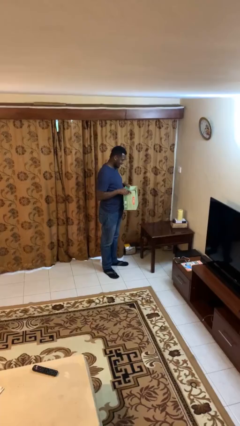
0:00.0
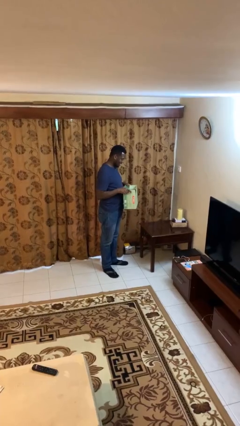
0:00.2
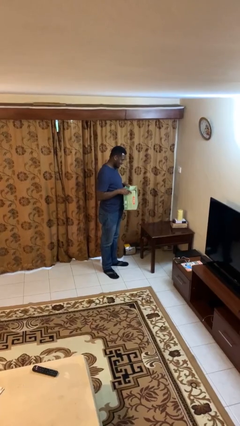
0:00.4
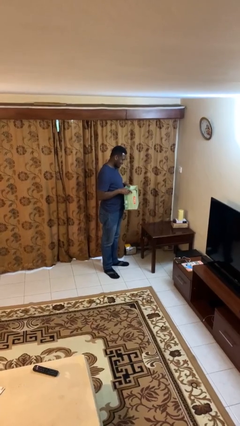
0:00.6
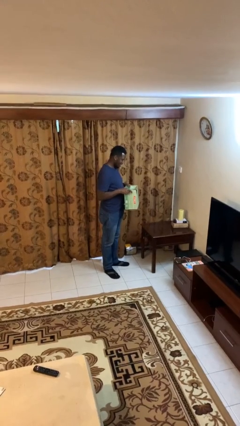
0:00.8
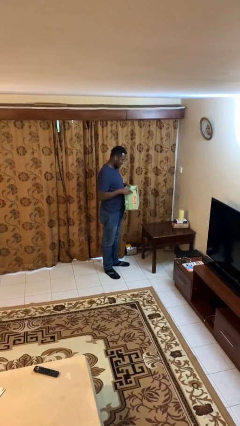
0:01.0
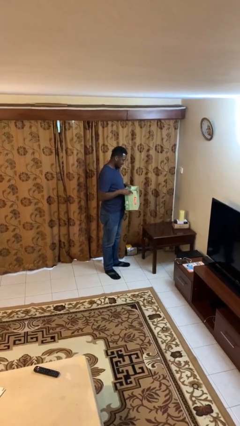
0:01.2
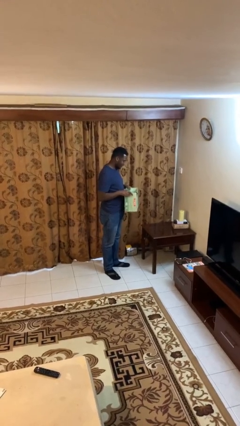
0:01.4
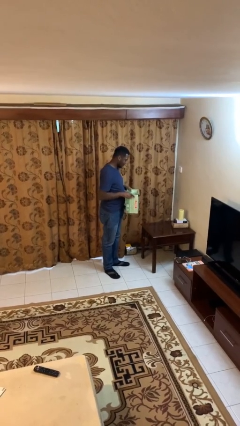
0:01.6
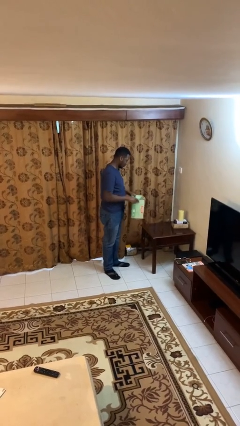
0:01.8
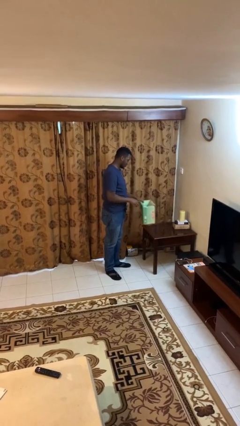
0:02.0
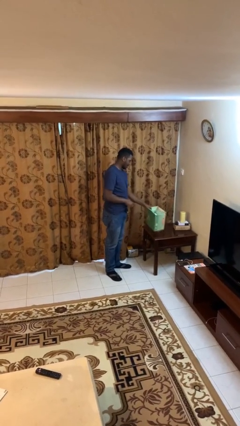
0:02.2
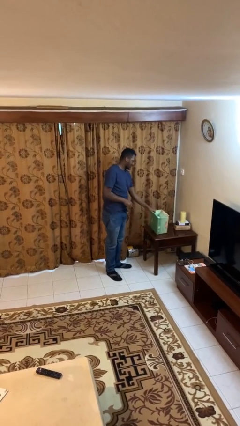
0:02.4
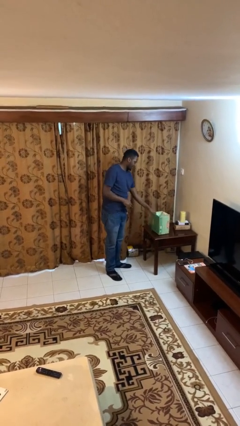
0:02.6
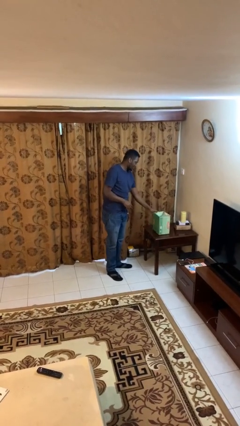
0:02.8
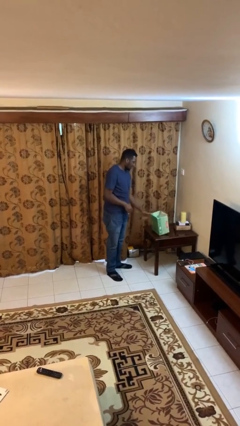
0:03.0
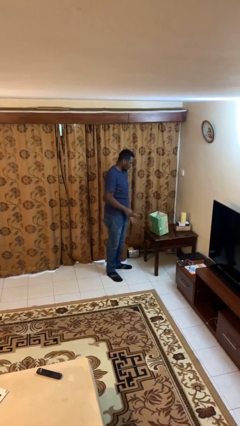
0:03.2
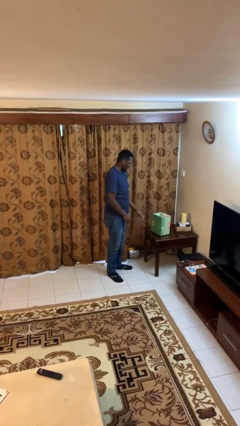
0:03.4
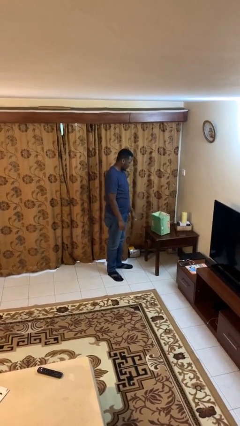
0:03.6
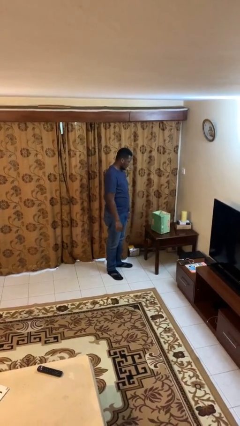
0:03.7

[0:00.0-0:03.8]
person puts down object on table

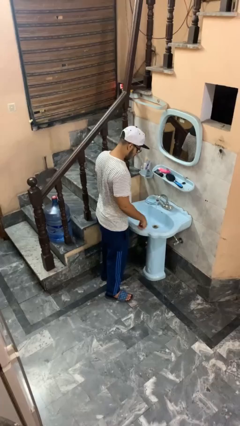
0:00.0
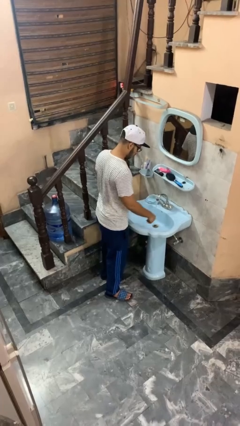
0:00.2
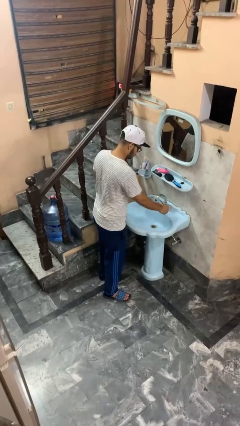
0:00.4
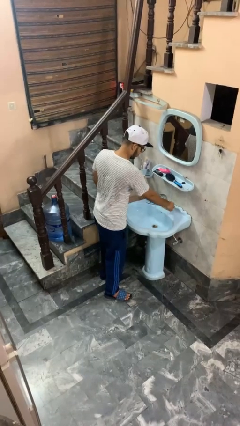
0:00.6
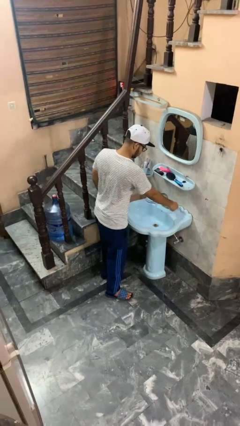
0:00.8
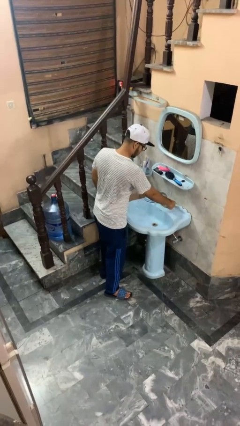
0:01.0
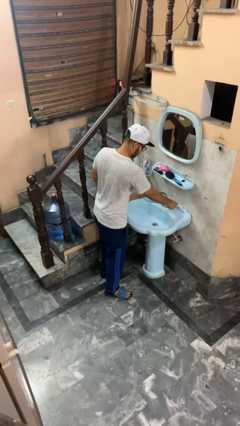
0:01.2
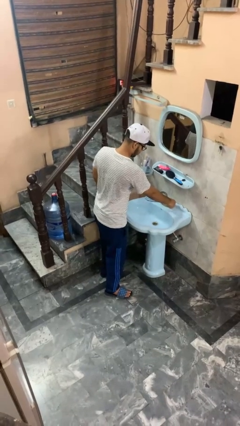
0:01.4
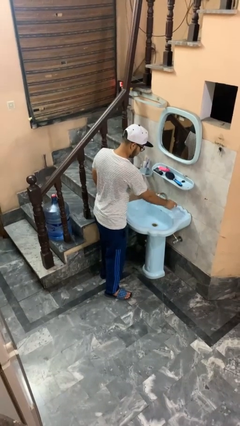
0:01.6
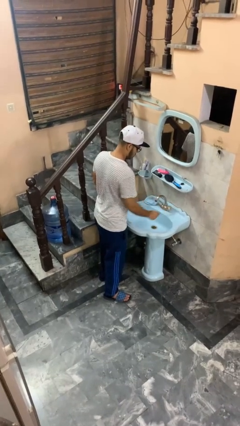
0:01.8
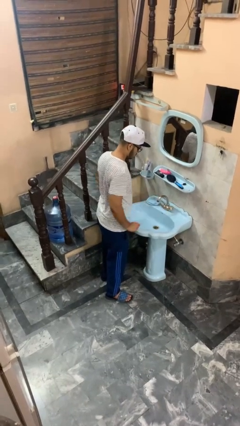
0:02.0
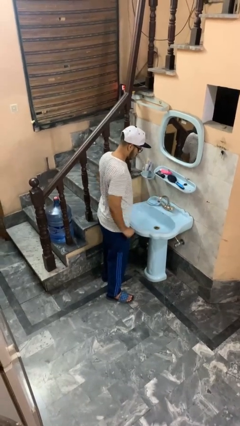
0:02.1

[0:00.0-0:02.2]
person turns off faucet

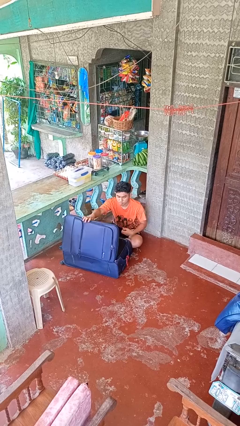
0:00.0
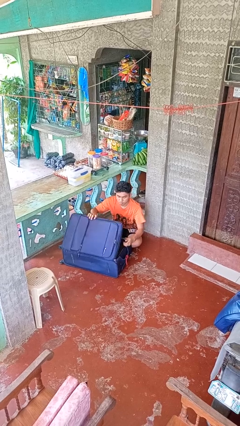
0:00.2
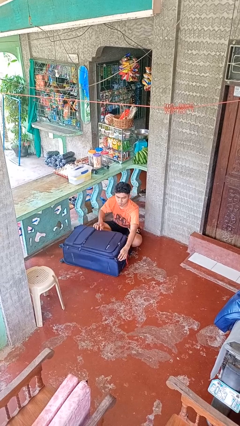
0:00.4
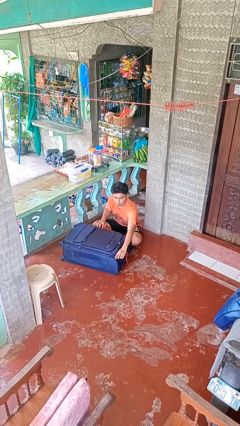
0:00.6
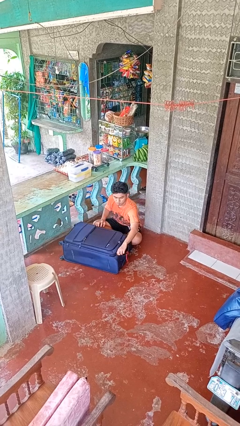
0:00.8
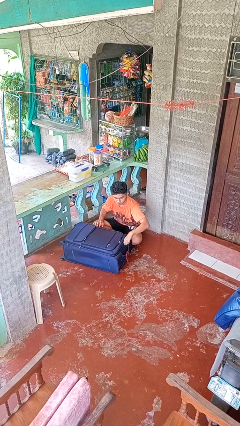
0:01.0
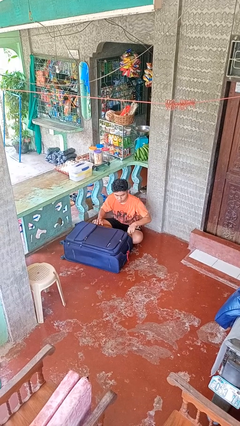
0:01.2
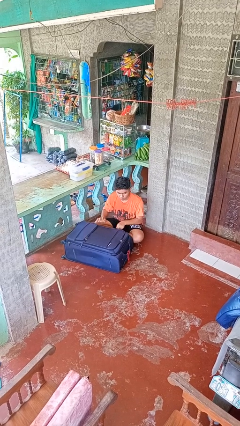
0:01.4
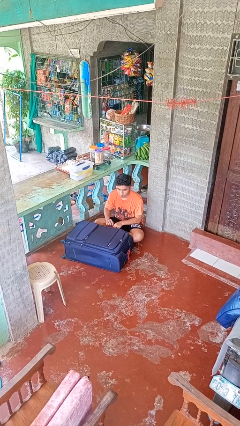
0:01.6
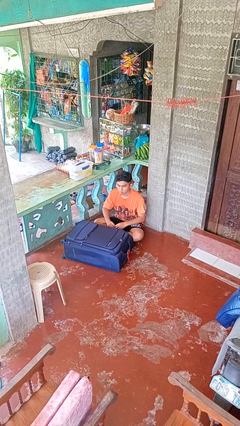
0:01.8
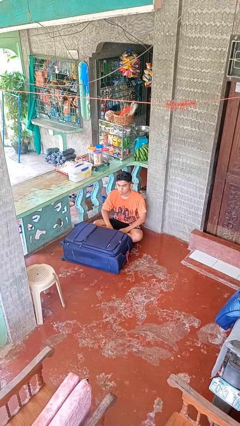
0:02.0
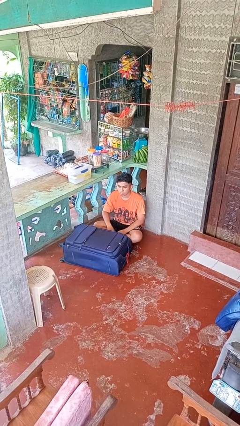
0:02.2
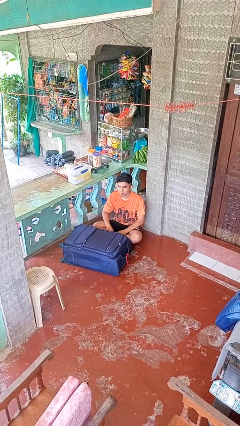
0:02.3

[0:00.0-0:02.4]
person closes suitcase

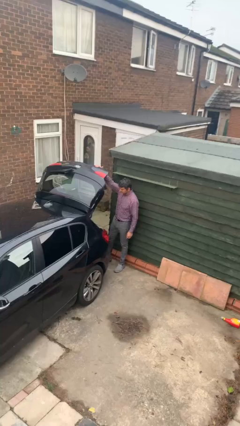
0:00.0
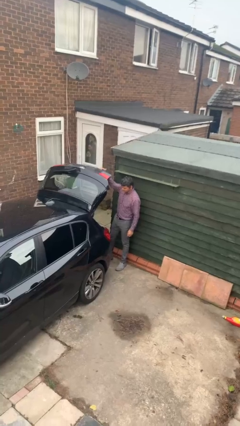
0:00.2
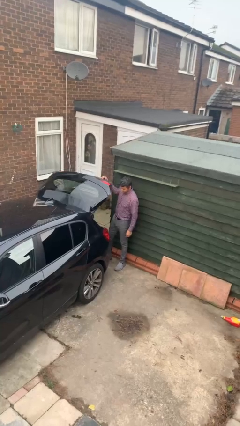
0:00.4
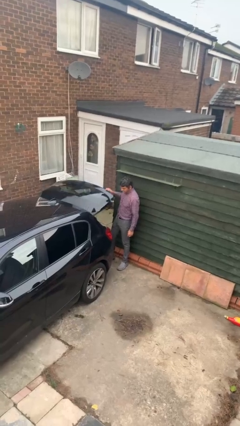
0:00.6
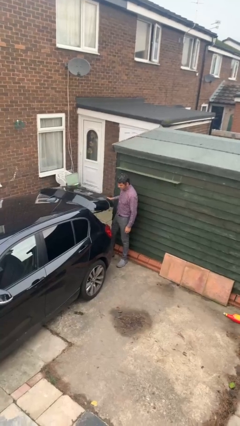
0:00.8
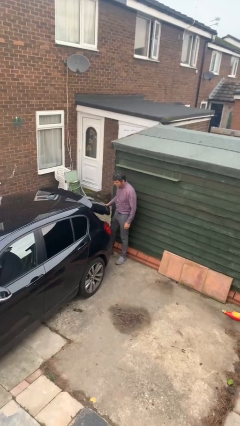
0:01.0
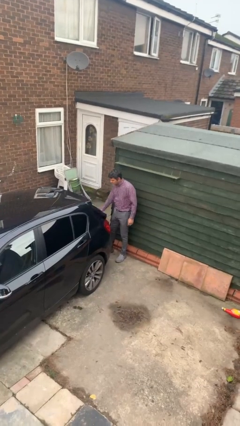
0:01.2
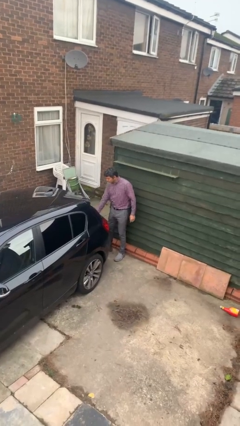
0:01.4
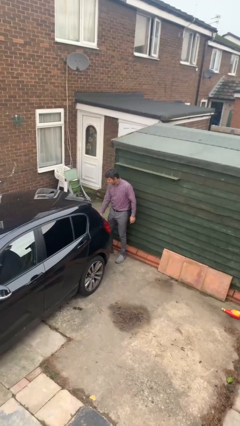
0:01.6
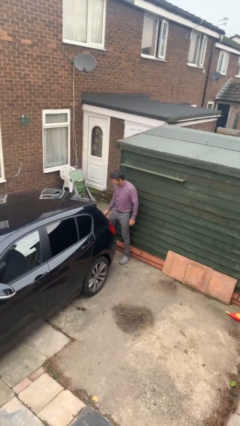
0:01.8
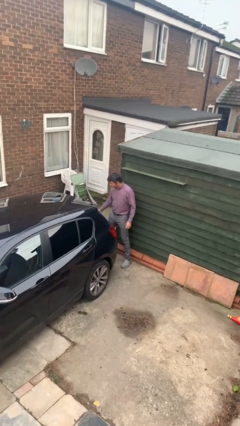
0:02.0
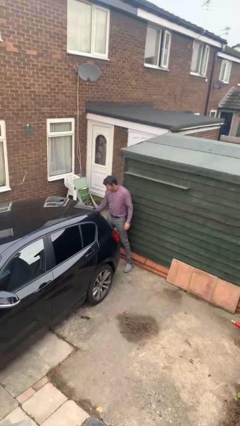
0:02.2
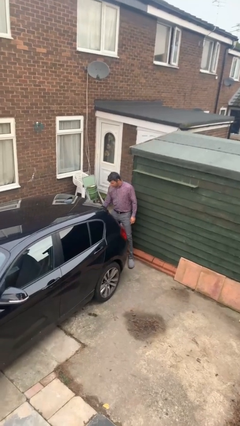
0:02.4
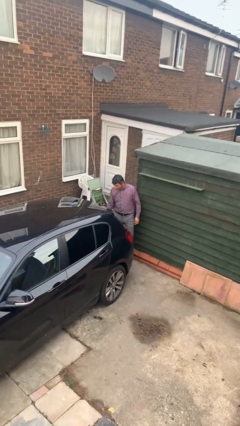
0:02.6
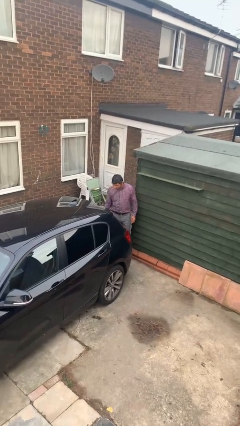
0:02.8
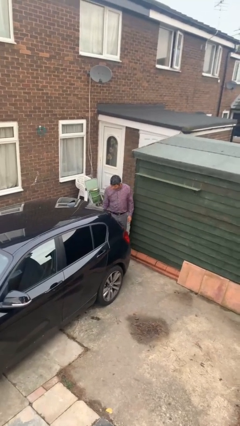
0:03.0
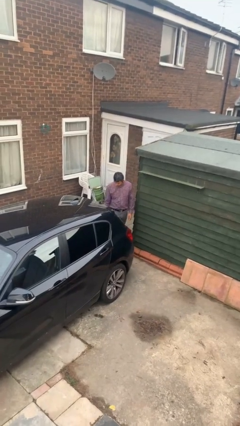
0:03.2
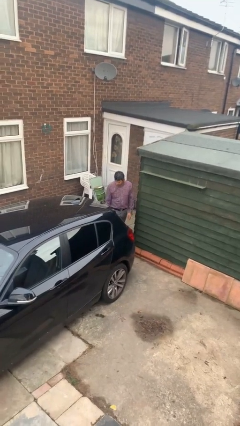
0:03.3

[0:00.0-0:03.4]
person closes car trunk

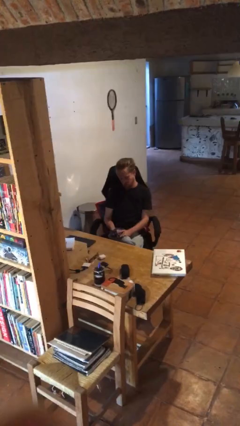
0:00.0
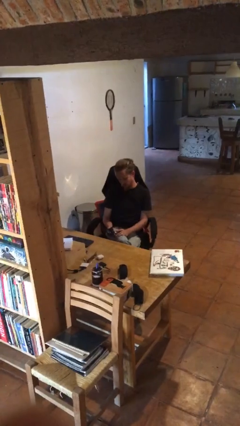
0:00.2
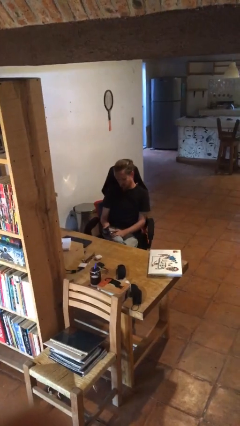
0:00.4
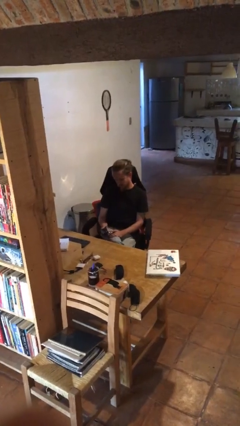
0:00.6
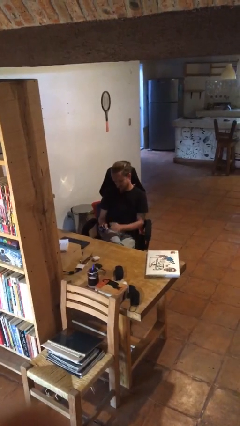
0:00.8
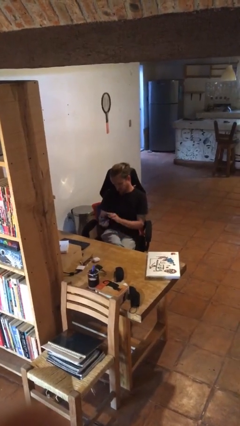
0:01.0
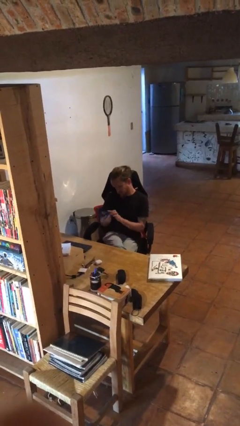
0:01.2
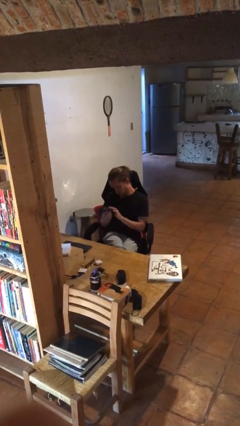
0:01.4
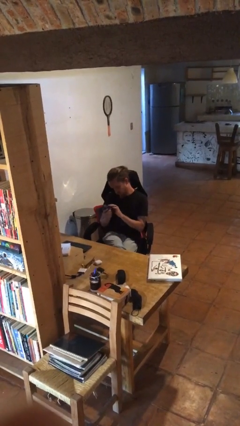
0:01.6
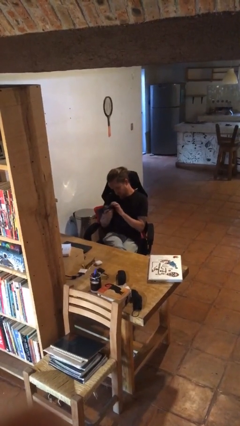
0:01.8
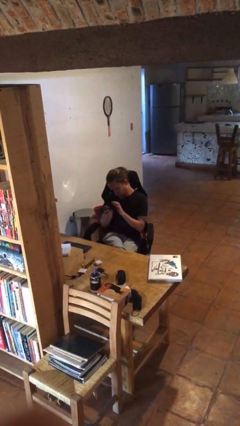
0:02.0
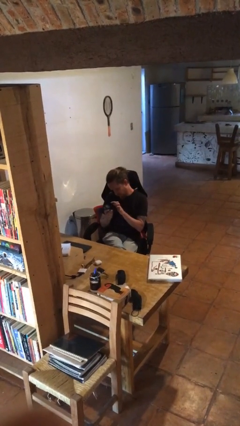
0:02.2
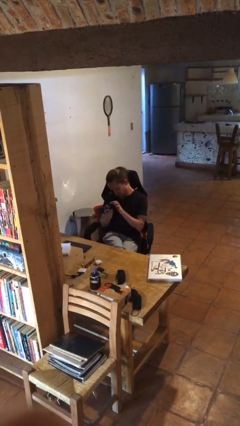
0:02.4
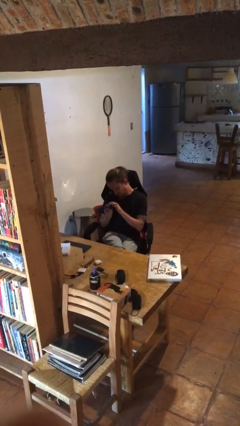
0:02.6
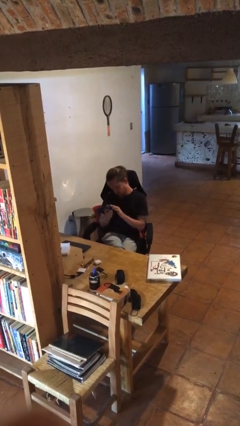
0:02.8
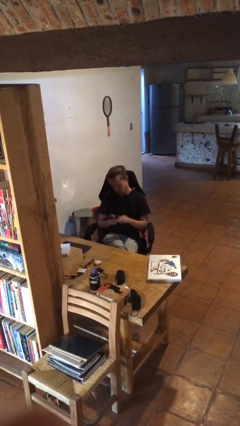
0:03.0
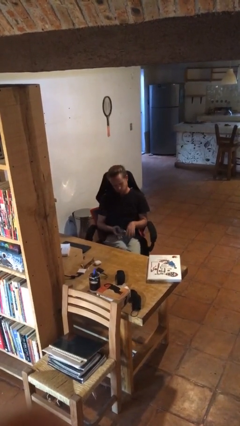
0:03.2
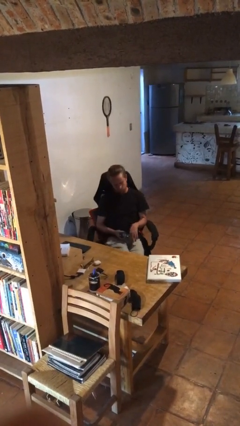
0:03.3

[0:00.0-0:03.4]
person taps object with finger

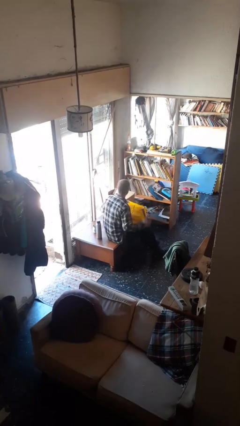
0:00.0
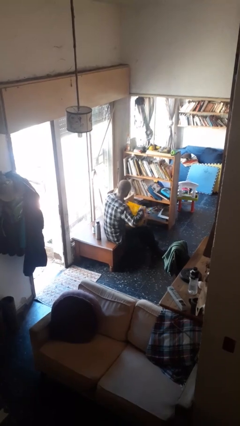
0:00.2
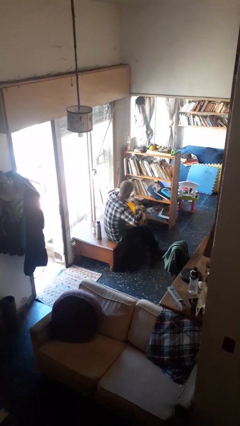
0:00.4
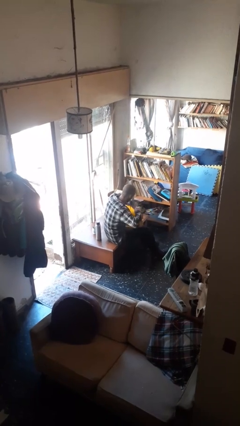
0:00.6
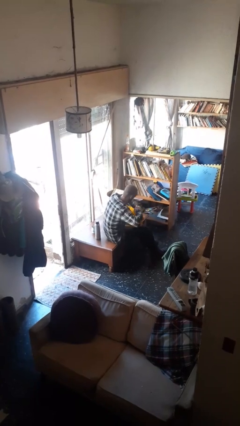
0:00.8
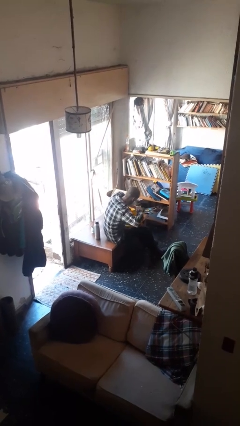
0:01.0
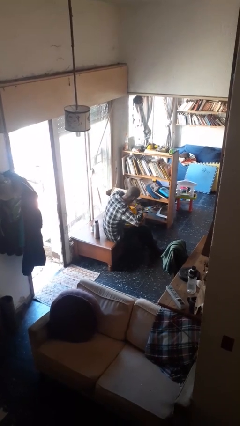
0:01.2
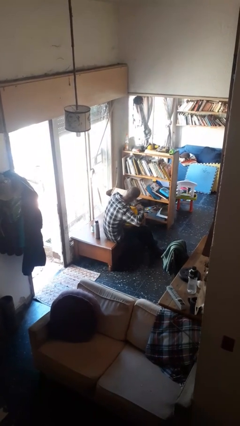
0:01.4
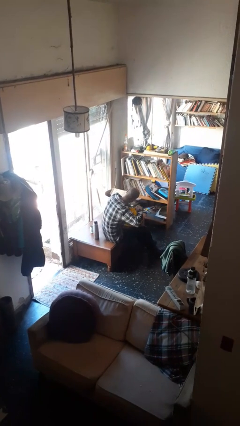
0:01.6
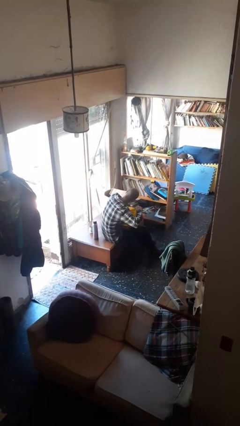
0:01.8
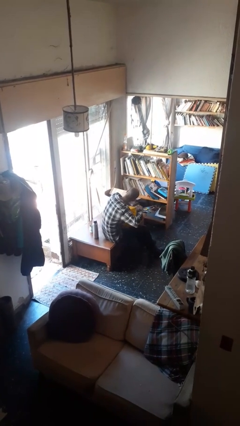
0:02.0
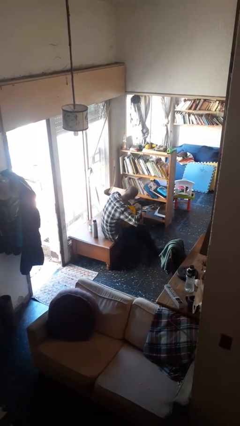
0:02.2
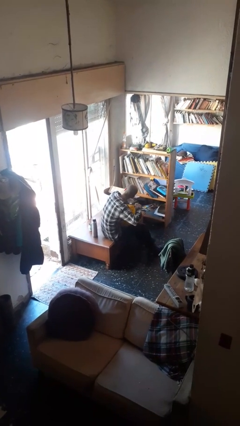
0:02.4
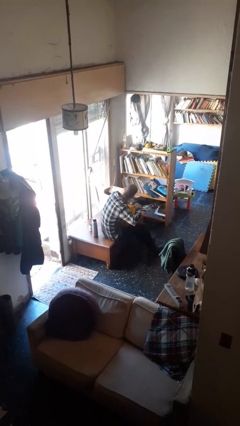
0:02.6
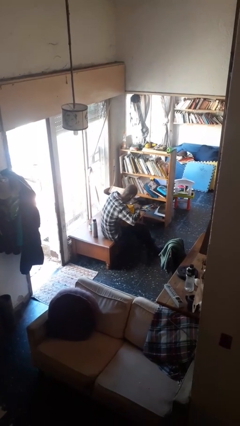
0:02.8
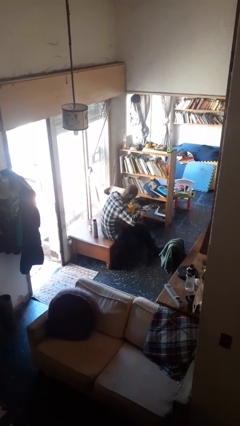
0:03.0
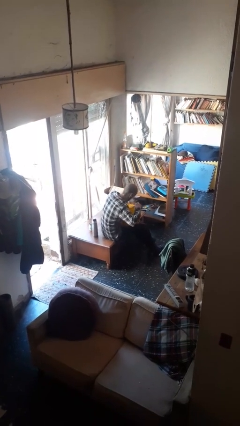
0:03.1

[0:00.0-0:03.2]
person searches in bag
